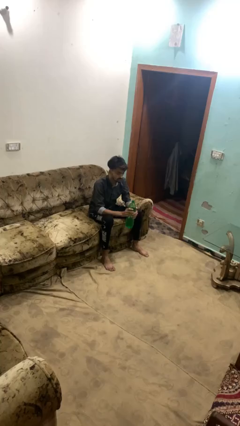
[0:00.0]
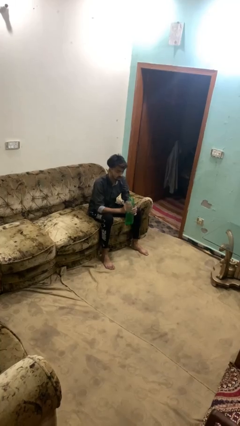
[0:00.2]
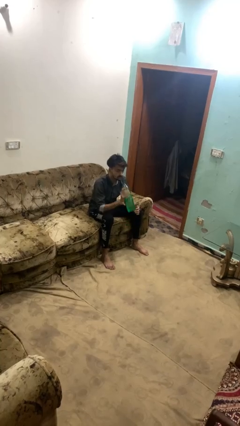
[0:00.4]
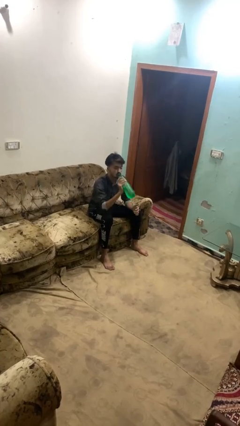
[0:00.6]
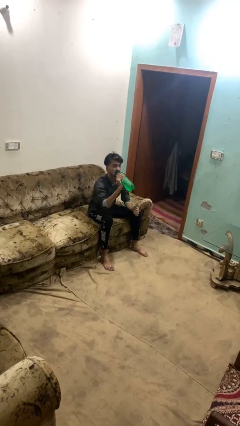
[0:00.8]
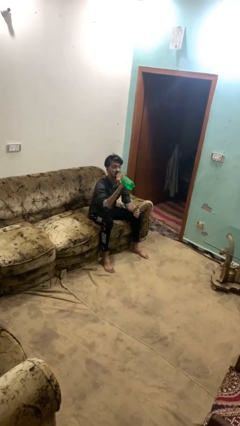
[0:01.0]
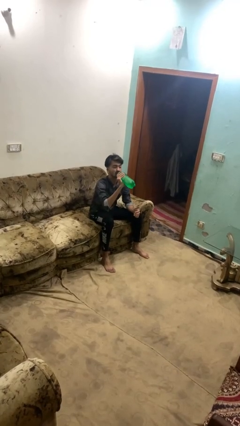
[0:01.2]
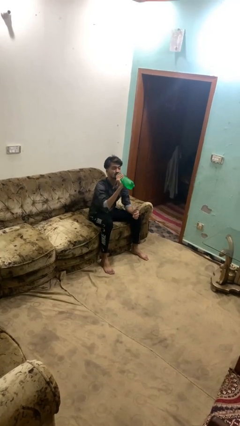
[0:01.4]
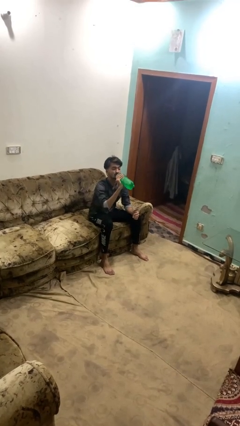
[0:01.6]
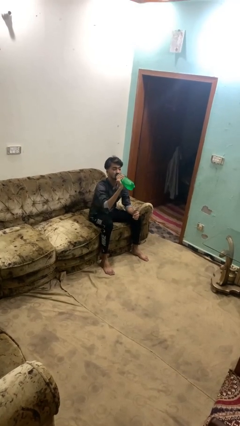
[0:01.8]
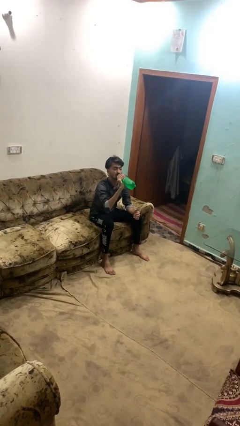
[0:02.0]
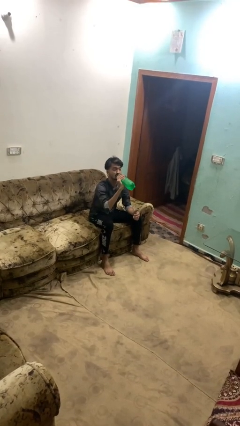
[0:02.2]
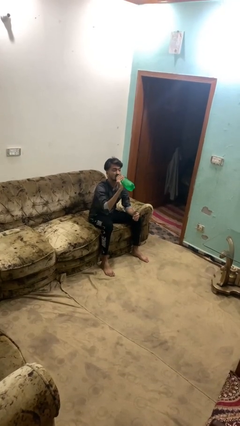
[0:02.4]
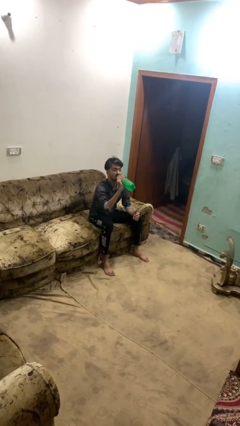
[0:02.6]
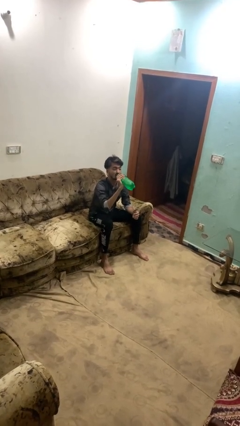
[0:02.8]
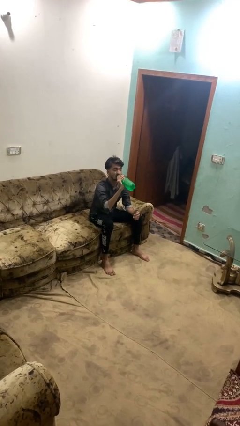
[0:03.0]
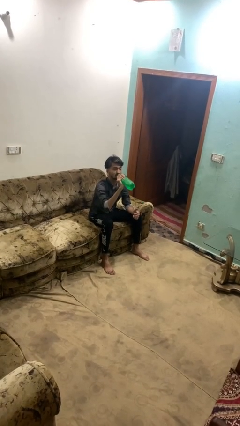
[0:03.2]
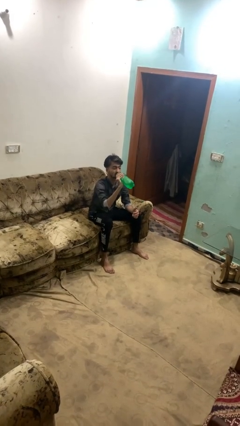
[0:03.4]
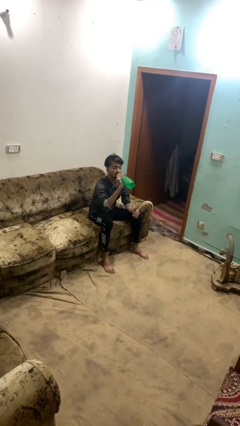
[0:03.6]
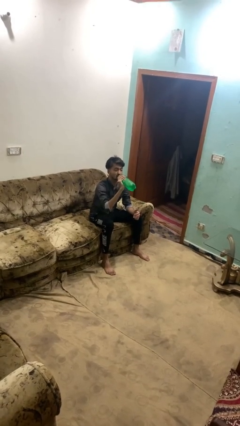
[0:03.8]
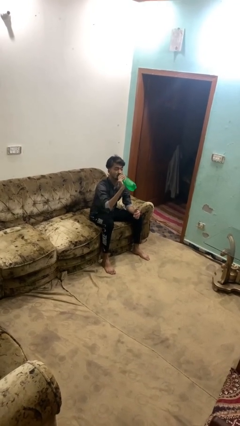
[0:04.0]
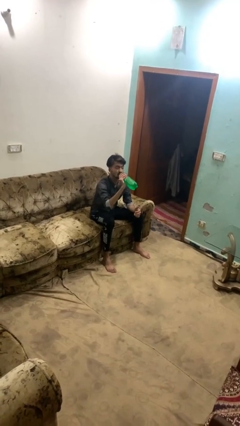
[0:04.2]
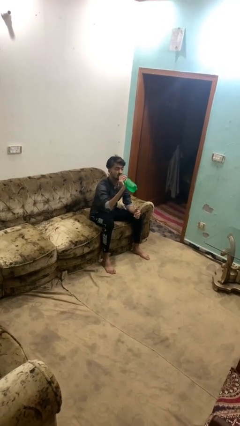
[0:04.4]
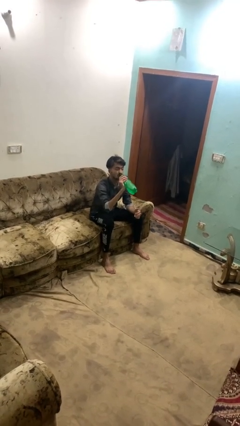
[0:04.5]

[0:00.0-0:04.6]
person drinks from bottle

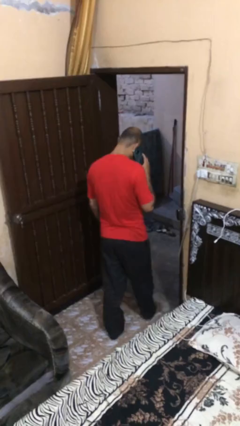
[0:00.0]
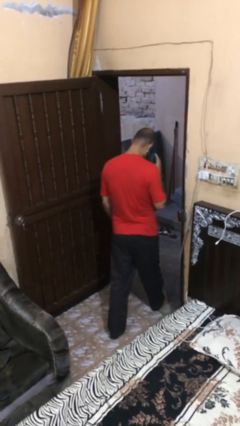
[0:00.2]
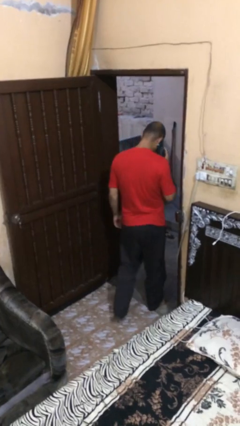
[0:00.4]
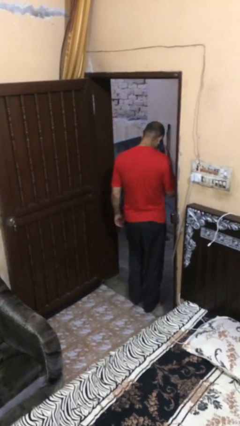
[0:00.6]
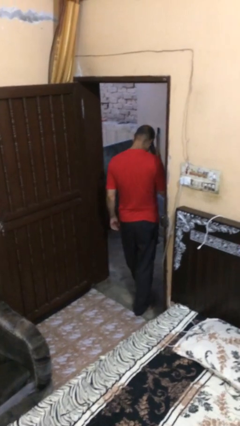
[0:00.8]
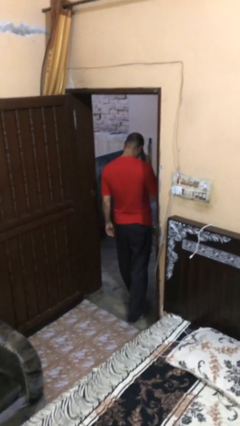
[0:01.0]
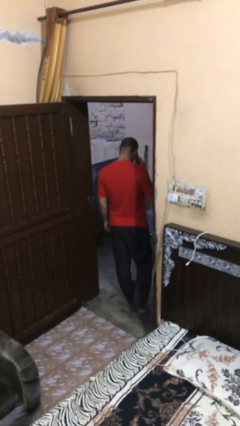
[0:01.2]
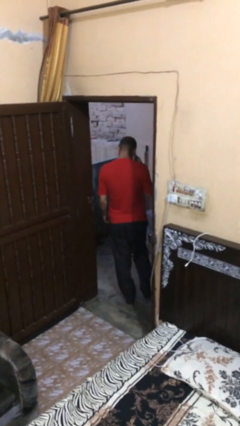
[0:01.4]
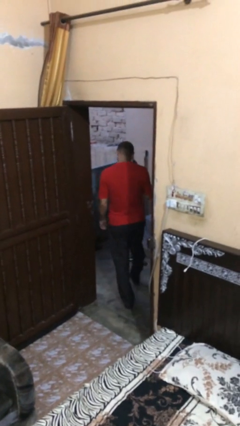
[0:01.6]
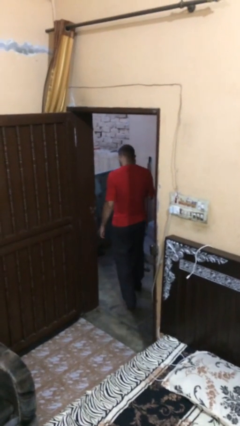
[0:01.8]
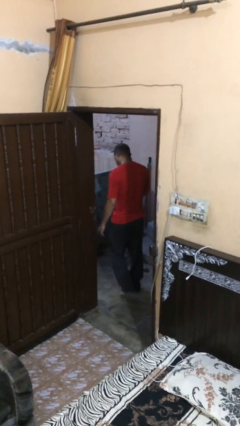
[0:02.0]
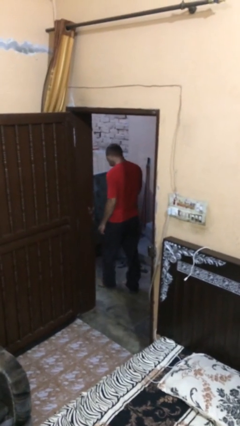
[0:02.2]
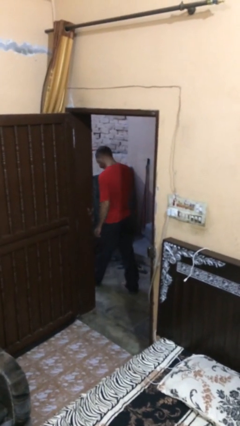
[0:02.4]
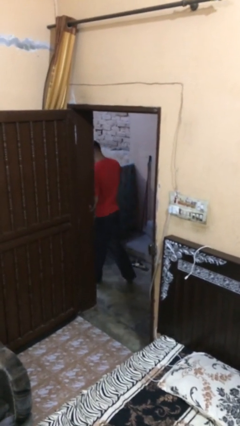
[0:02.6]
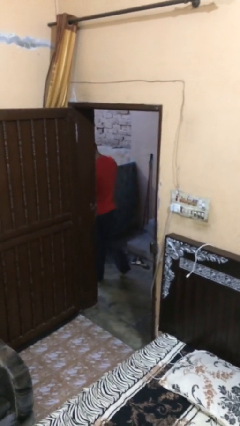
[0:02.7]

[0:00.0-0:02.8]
person exits scene through structure

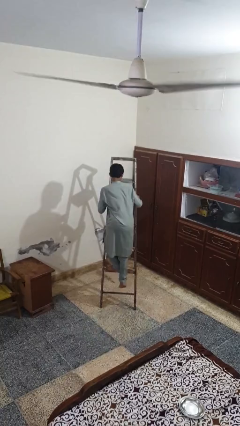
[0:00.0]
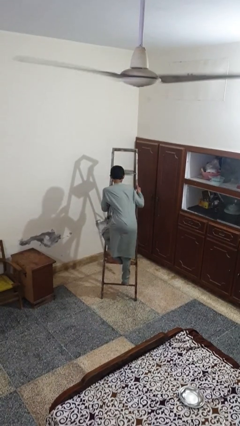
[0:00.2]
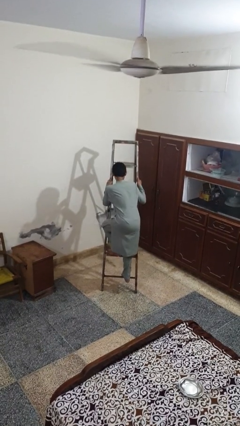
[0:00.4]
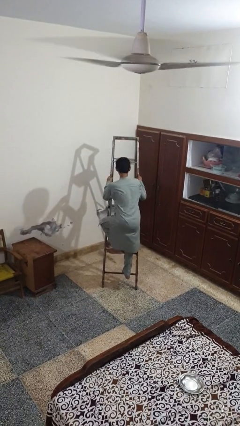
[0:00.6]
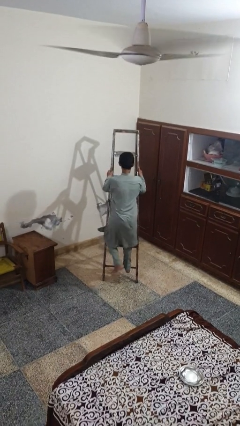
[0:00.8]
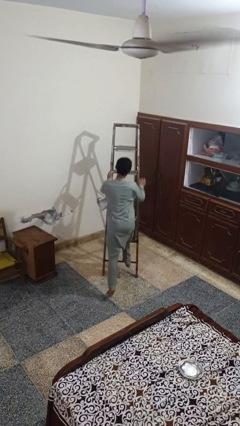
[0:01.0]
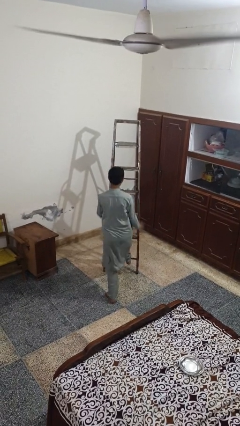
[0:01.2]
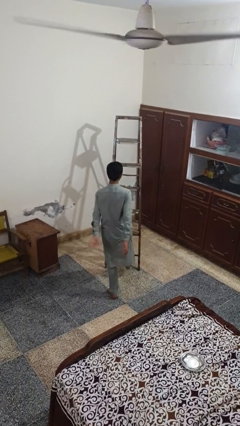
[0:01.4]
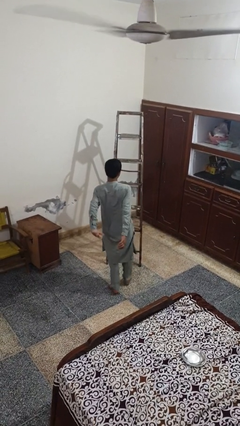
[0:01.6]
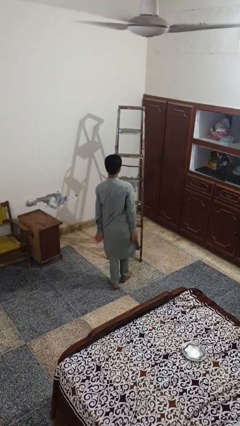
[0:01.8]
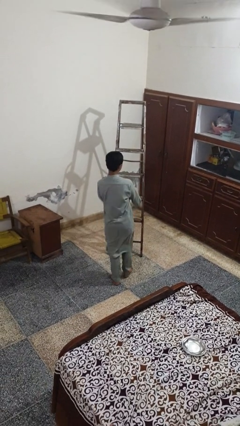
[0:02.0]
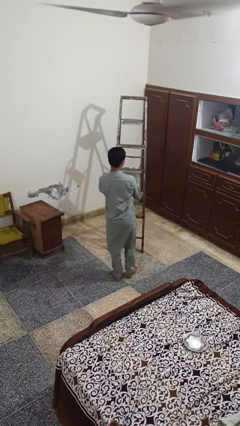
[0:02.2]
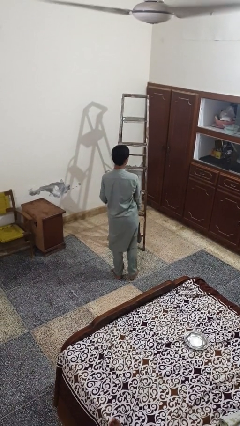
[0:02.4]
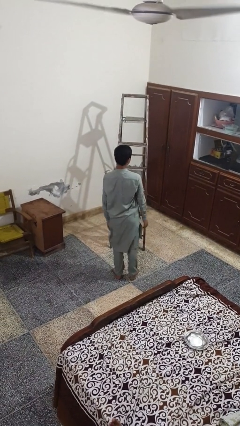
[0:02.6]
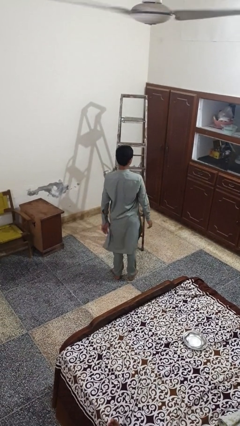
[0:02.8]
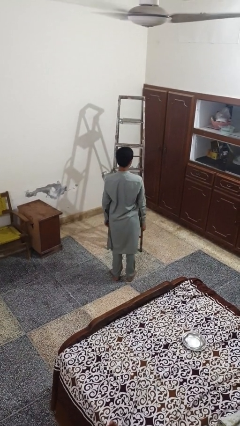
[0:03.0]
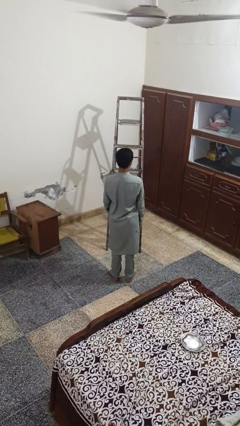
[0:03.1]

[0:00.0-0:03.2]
person climbs down ladder

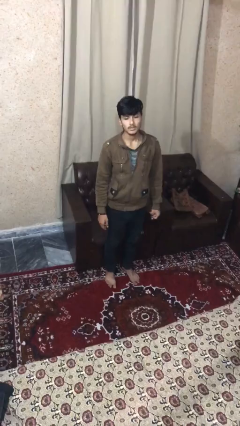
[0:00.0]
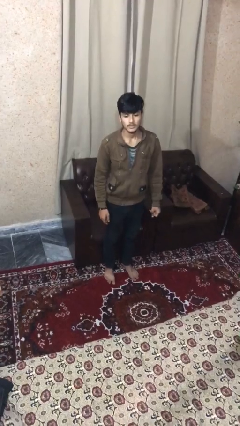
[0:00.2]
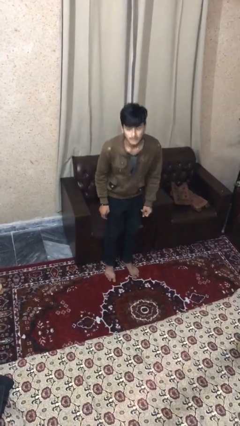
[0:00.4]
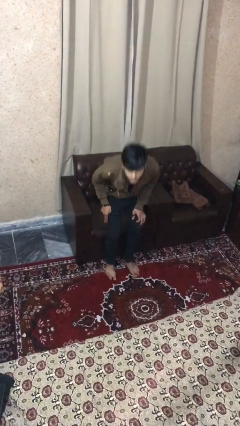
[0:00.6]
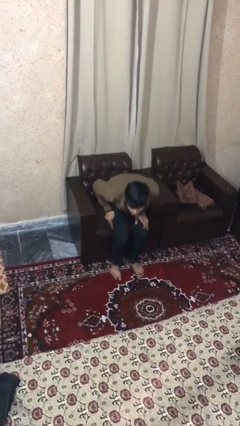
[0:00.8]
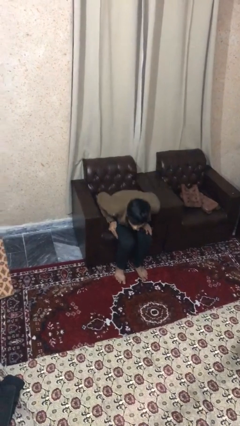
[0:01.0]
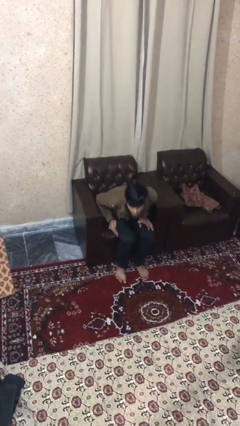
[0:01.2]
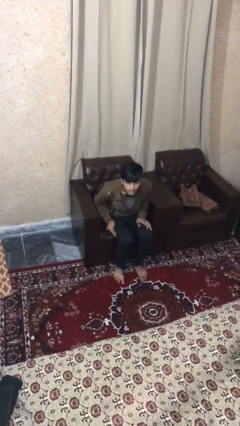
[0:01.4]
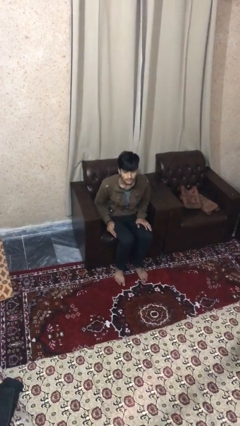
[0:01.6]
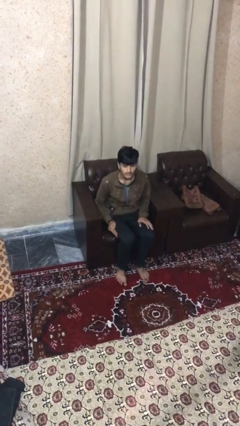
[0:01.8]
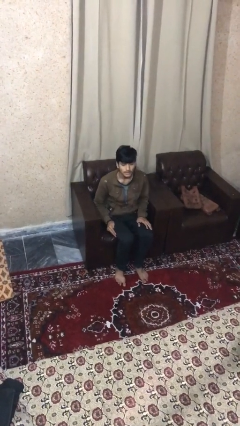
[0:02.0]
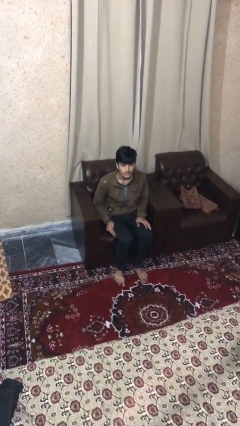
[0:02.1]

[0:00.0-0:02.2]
person sits down

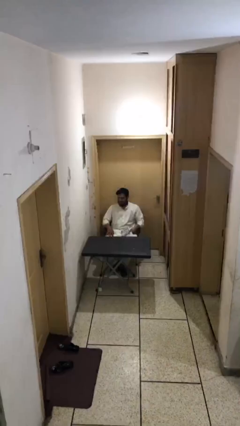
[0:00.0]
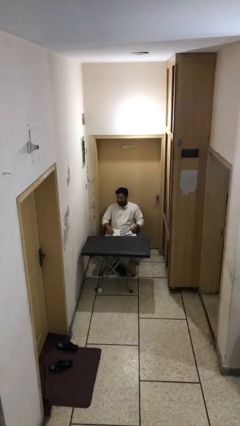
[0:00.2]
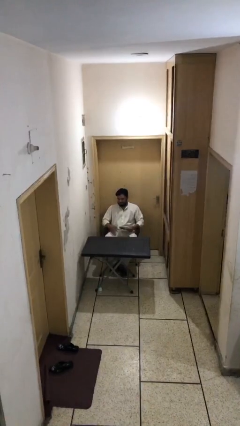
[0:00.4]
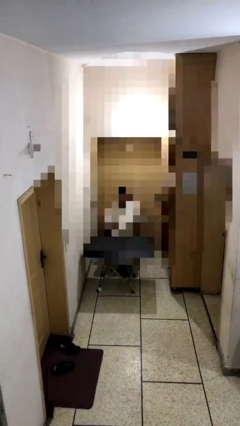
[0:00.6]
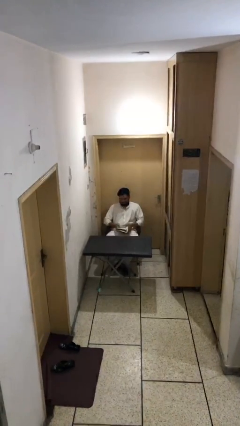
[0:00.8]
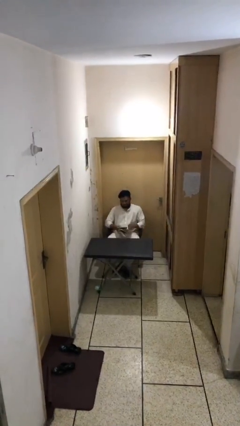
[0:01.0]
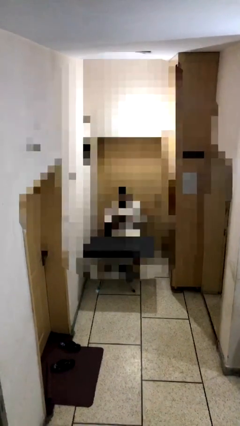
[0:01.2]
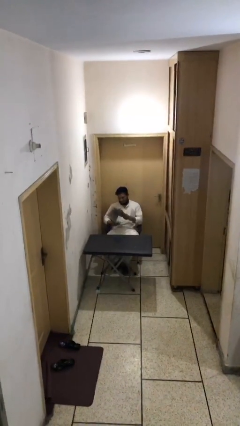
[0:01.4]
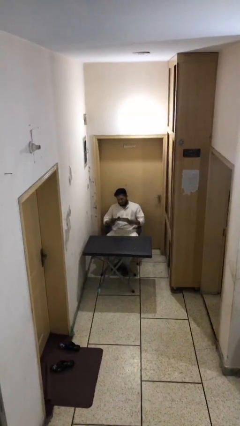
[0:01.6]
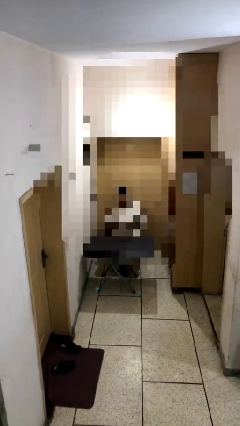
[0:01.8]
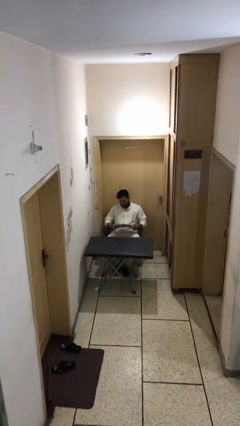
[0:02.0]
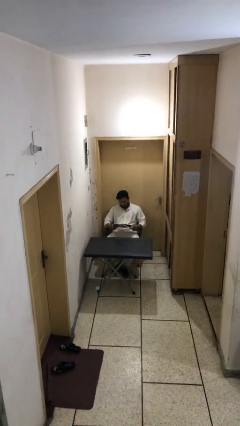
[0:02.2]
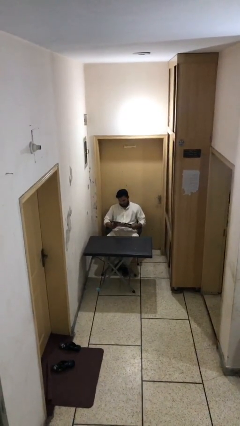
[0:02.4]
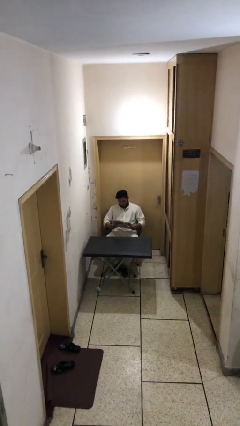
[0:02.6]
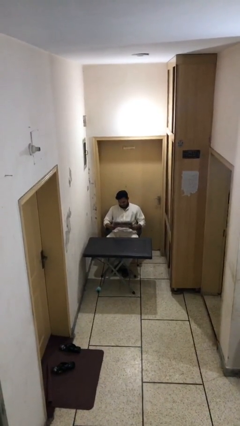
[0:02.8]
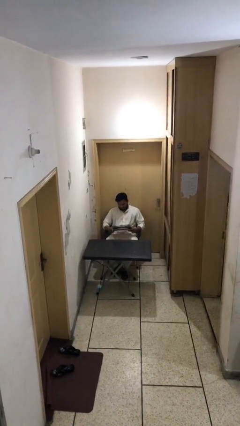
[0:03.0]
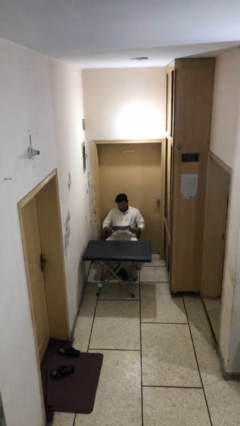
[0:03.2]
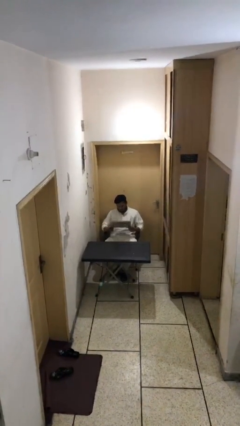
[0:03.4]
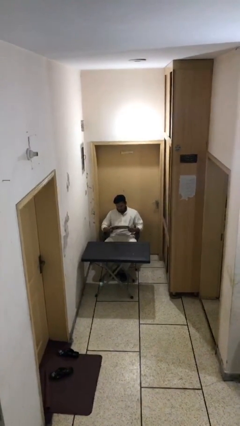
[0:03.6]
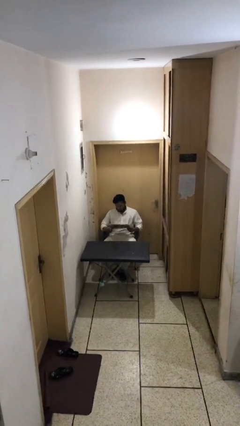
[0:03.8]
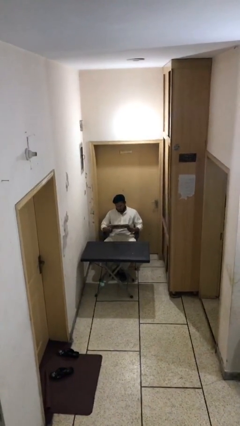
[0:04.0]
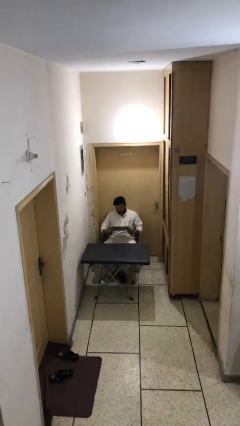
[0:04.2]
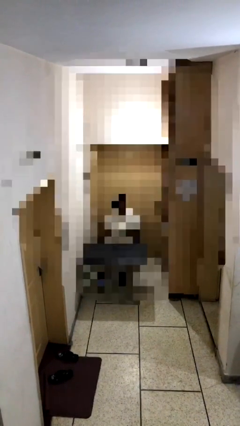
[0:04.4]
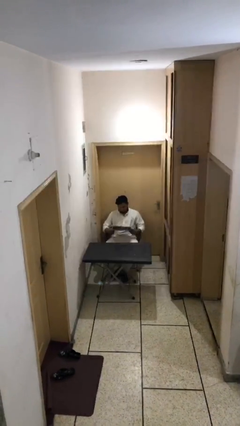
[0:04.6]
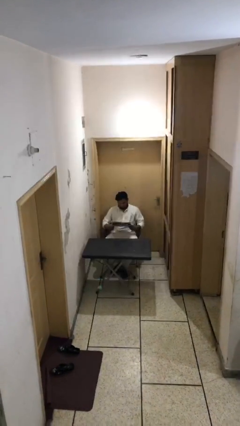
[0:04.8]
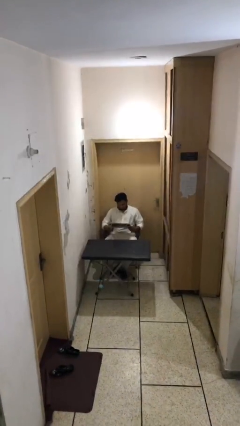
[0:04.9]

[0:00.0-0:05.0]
person reads document
